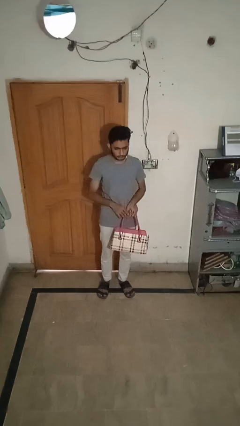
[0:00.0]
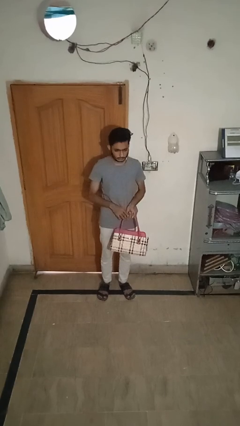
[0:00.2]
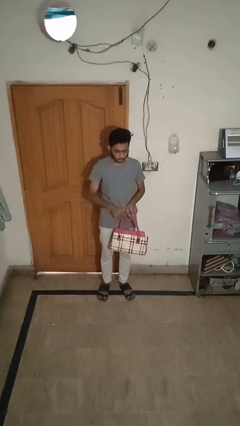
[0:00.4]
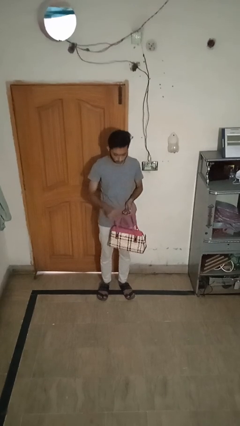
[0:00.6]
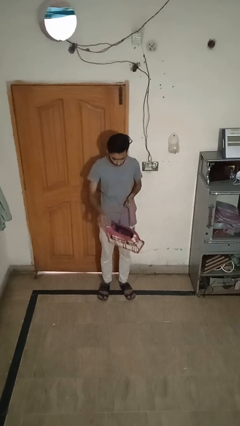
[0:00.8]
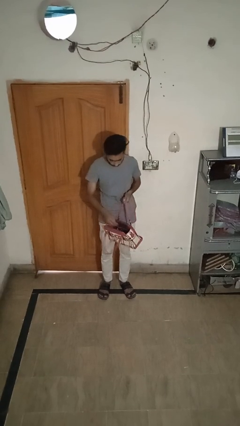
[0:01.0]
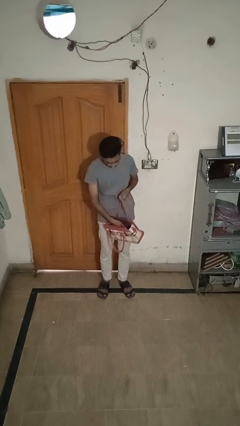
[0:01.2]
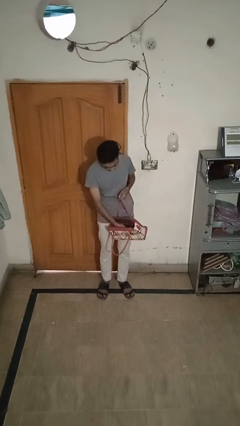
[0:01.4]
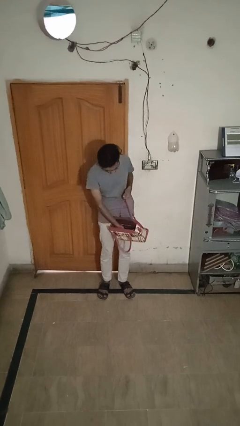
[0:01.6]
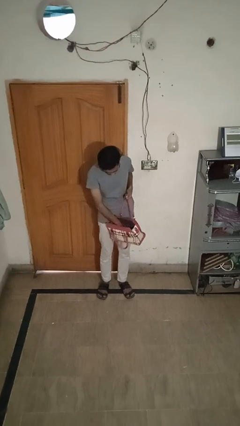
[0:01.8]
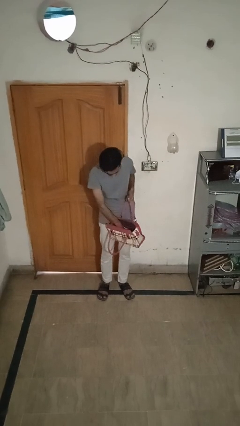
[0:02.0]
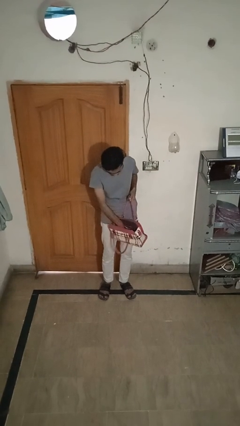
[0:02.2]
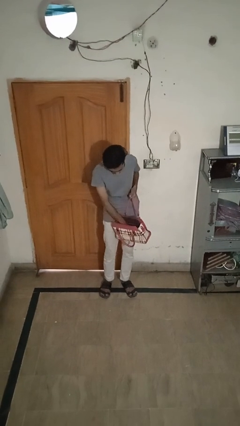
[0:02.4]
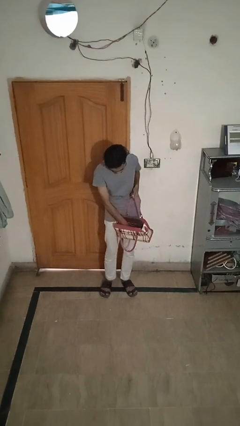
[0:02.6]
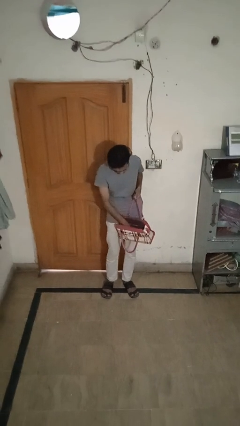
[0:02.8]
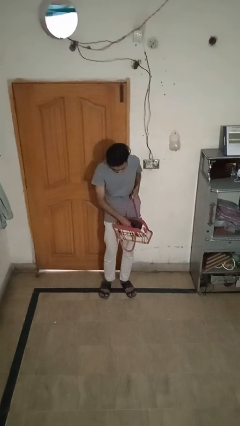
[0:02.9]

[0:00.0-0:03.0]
person searches in purse

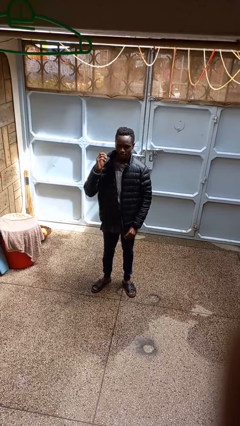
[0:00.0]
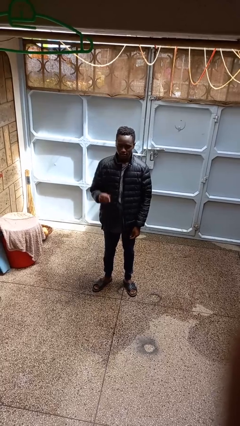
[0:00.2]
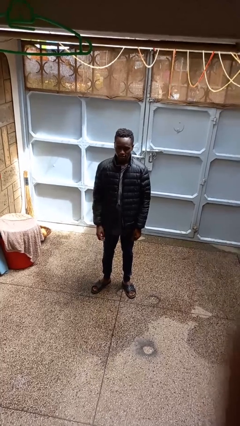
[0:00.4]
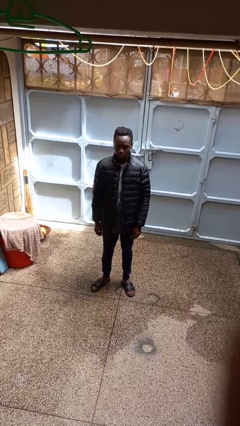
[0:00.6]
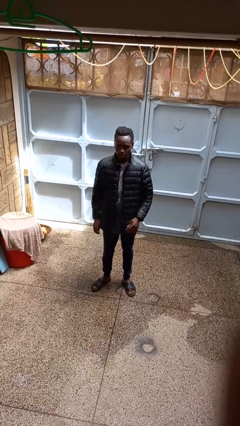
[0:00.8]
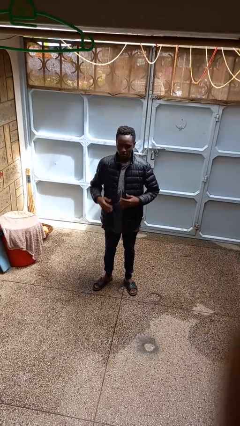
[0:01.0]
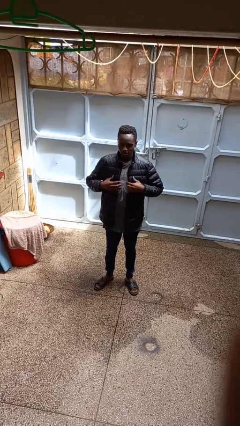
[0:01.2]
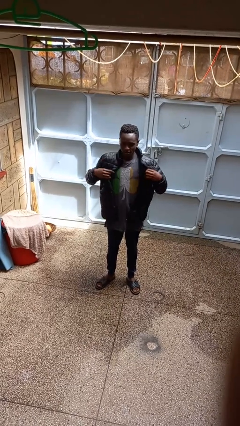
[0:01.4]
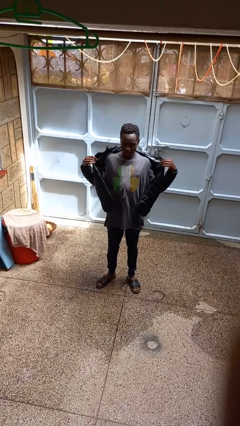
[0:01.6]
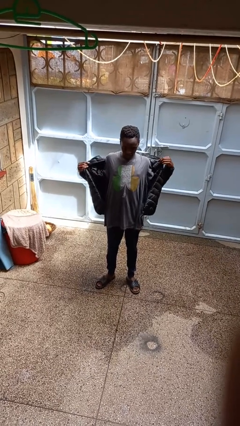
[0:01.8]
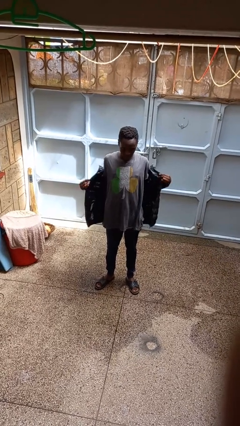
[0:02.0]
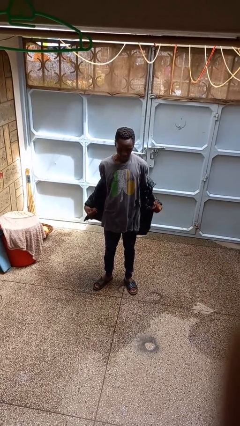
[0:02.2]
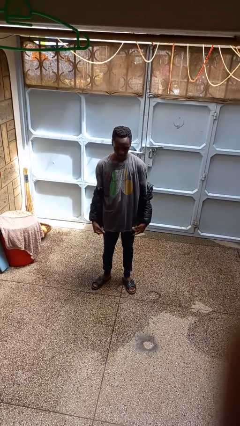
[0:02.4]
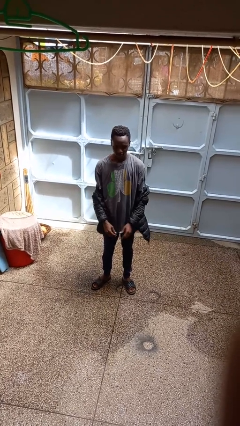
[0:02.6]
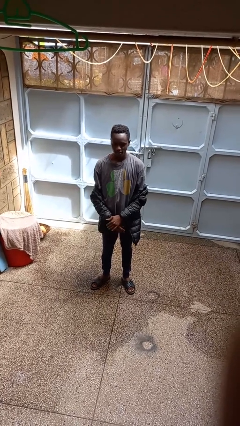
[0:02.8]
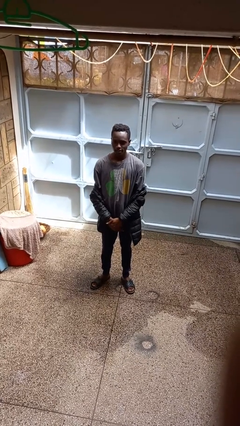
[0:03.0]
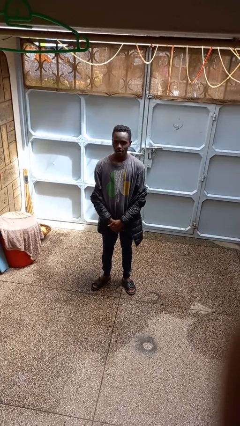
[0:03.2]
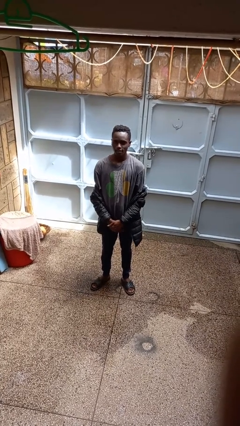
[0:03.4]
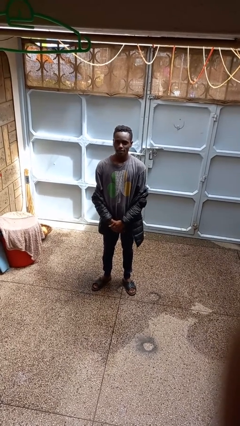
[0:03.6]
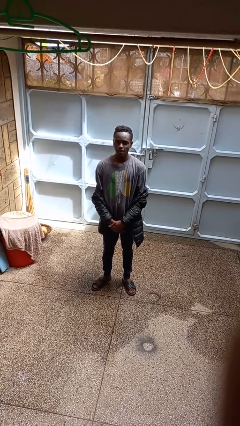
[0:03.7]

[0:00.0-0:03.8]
person takes off jacket

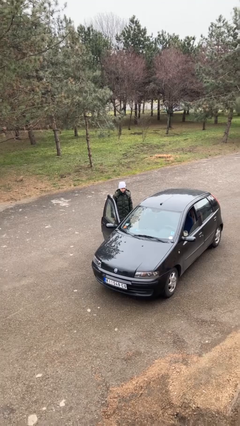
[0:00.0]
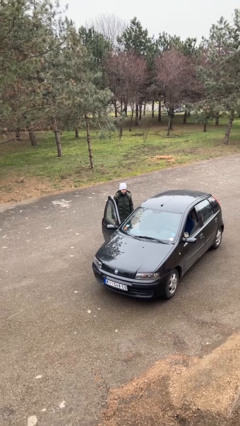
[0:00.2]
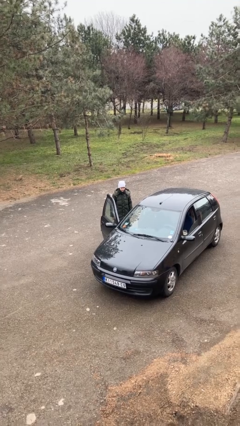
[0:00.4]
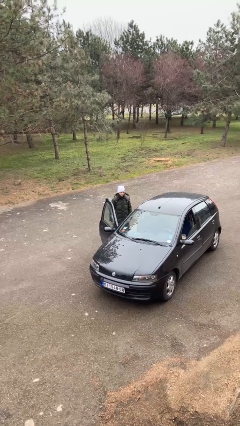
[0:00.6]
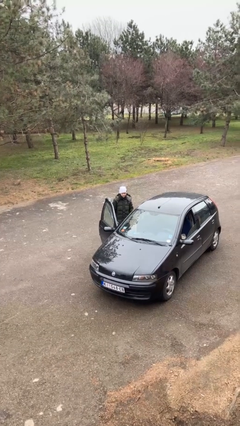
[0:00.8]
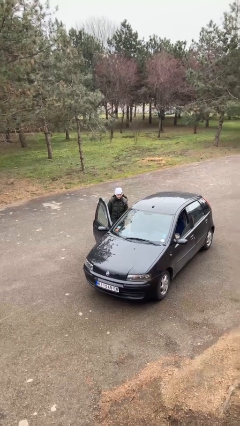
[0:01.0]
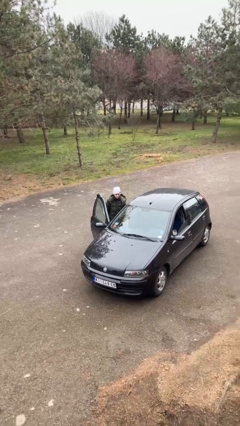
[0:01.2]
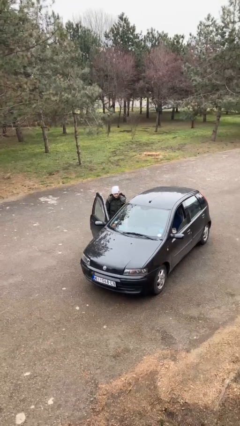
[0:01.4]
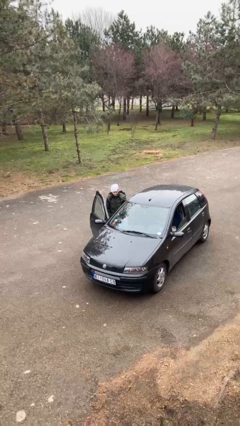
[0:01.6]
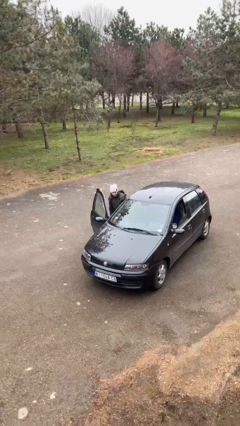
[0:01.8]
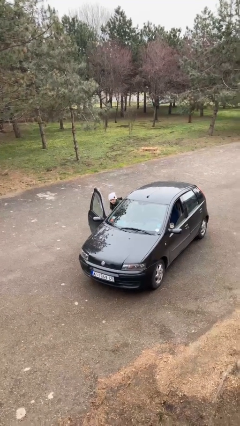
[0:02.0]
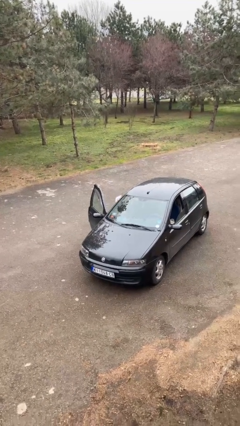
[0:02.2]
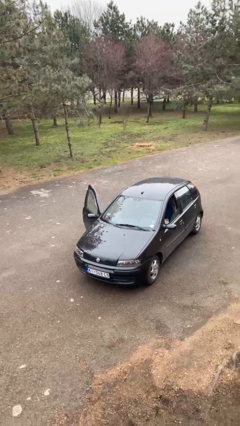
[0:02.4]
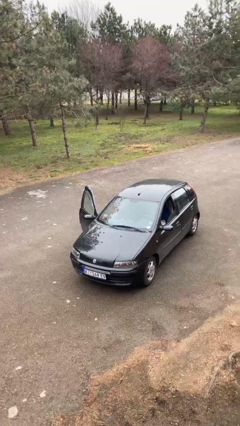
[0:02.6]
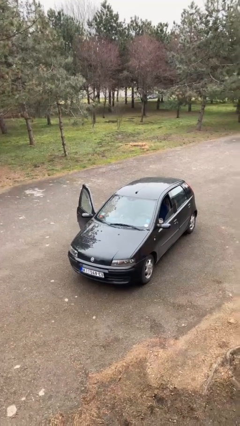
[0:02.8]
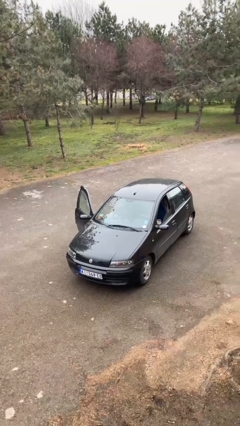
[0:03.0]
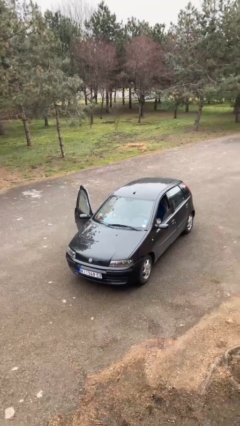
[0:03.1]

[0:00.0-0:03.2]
person enters car

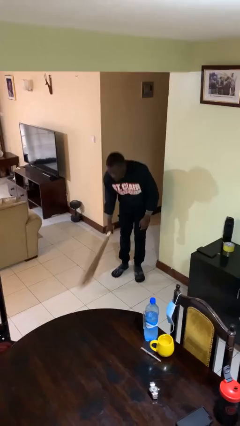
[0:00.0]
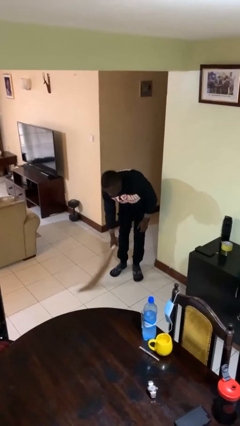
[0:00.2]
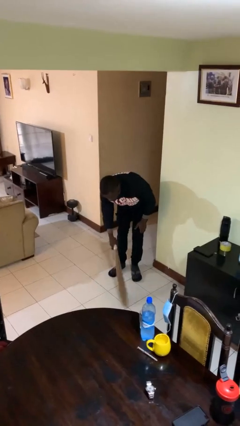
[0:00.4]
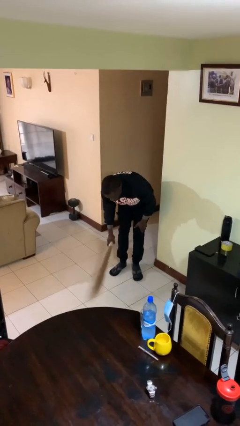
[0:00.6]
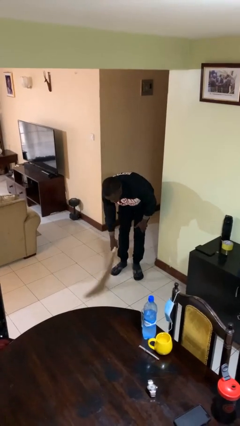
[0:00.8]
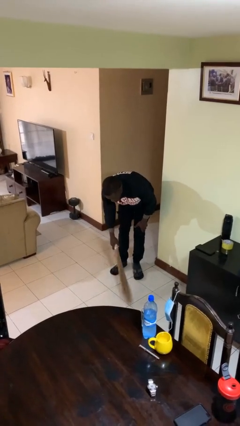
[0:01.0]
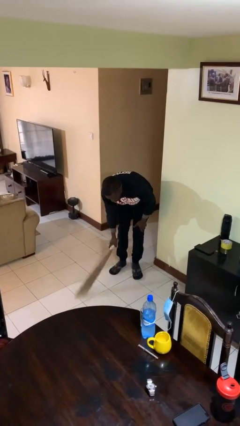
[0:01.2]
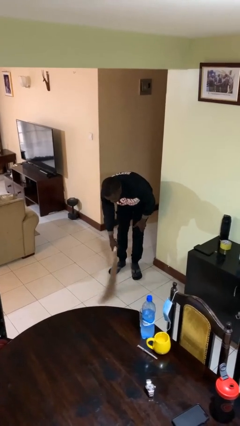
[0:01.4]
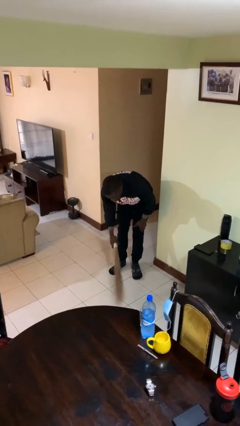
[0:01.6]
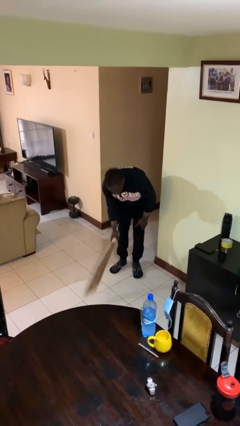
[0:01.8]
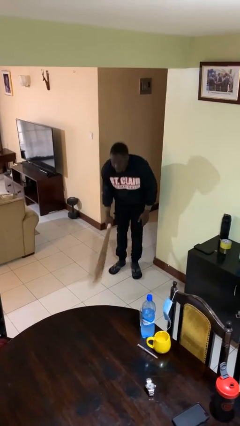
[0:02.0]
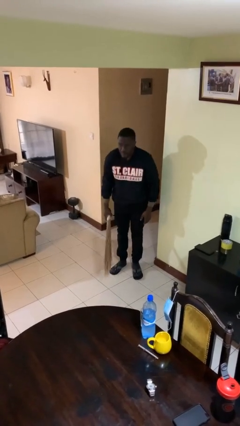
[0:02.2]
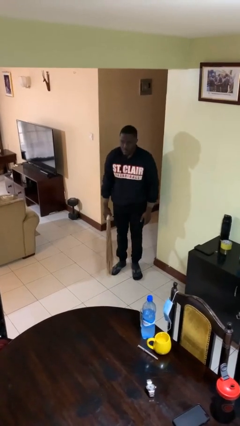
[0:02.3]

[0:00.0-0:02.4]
person sweeps floor

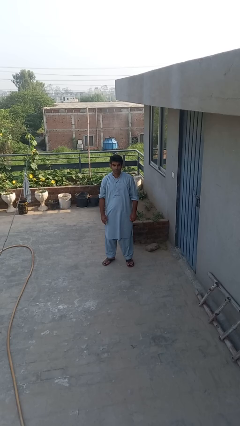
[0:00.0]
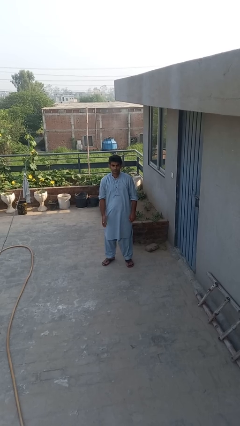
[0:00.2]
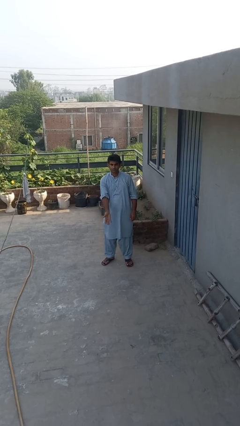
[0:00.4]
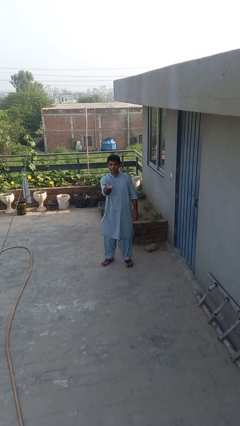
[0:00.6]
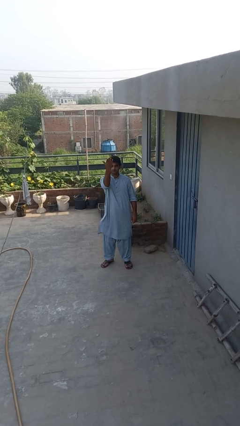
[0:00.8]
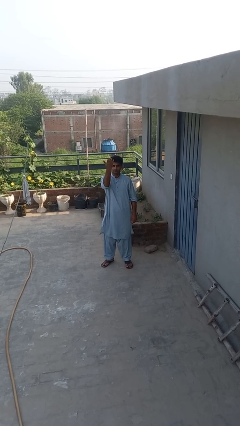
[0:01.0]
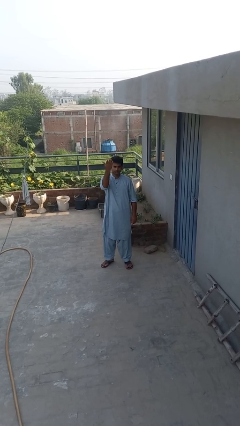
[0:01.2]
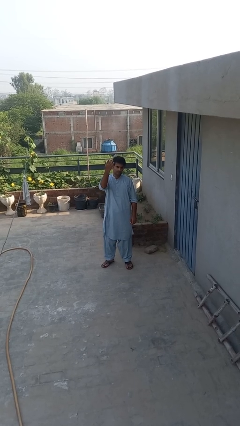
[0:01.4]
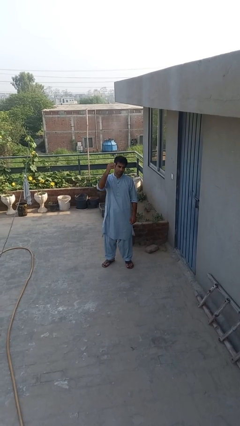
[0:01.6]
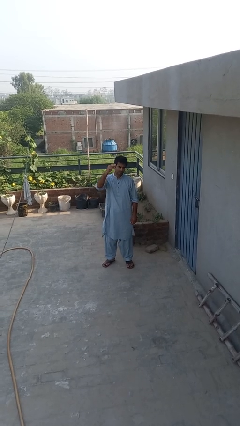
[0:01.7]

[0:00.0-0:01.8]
person gestures swipe up

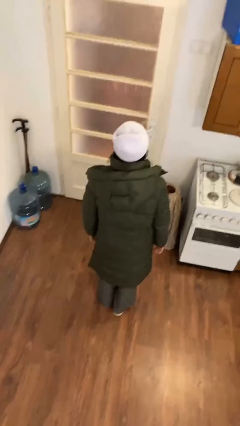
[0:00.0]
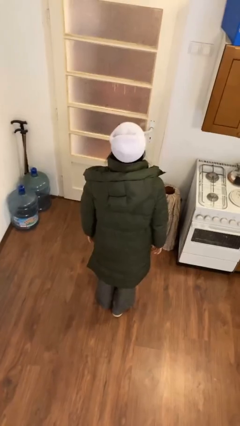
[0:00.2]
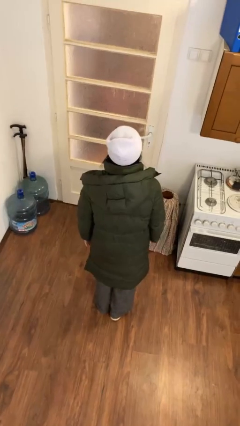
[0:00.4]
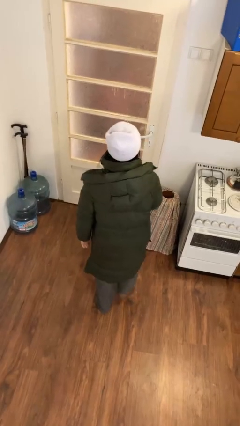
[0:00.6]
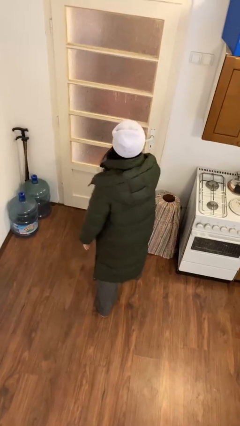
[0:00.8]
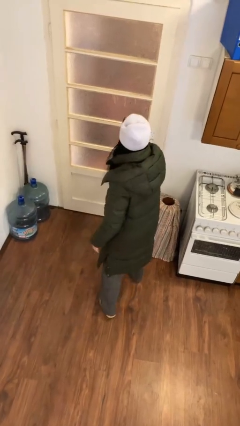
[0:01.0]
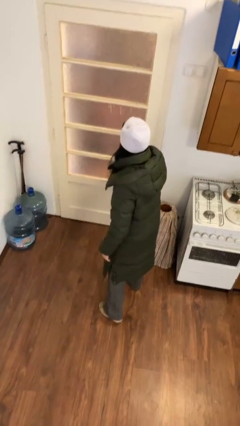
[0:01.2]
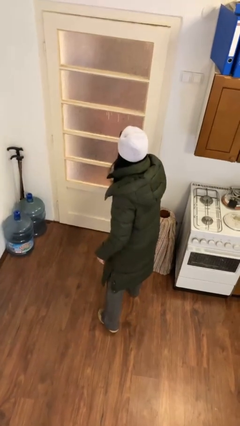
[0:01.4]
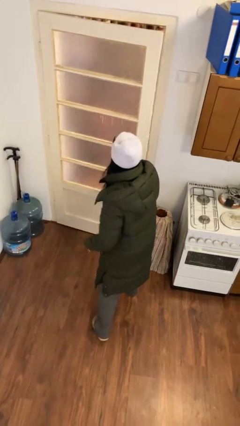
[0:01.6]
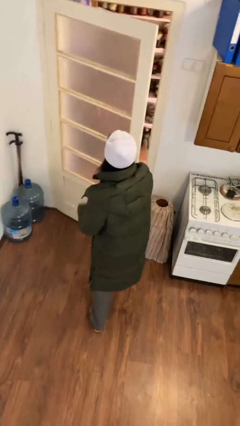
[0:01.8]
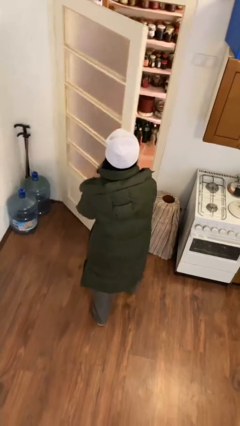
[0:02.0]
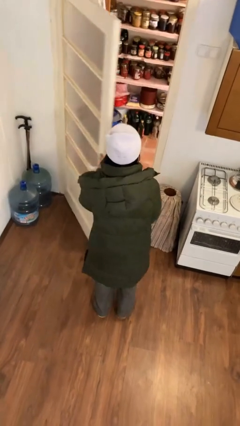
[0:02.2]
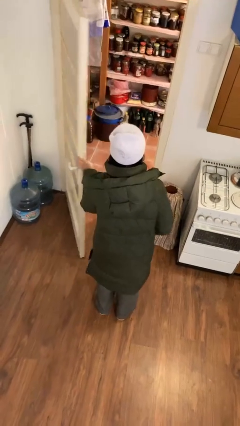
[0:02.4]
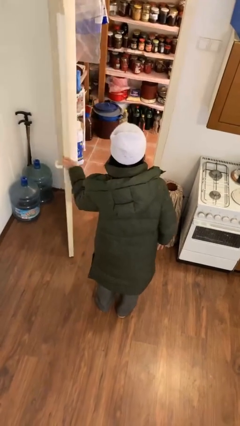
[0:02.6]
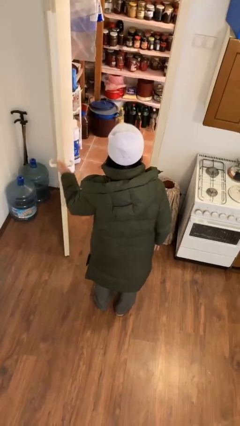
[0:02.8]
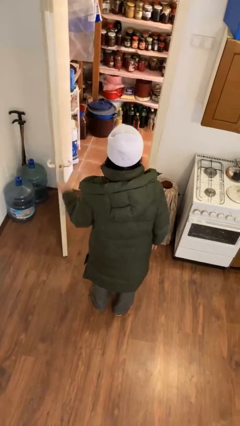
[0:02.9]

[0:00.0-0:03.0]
person opens facility door

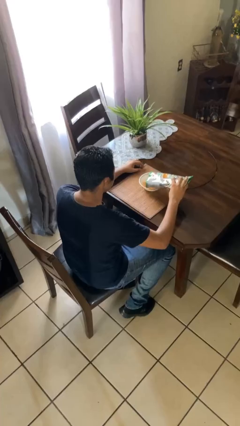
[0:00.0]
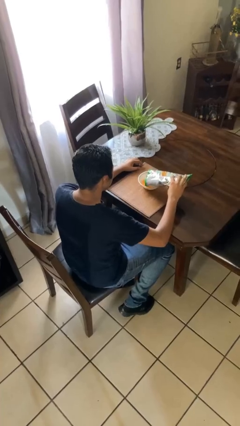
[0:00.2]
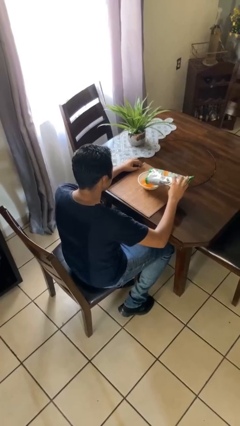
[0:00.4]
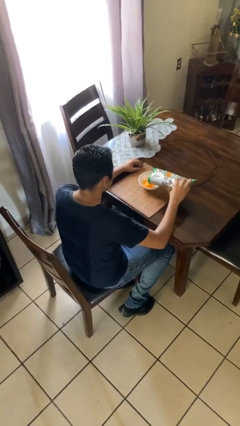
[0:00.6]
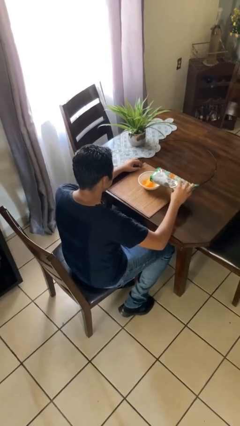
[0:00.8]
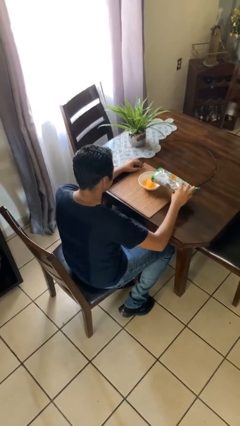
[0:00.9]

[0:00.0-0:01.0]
person pours into bowl
